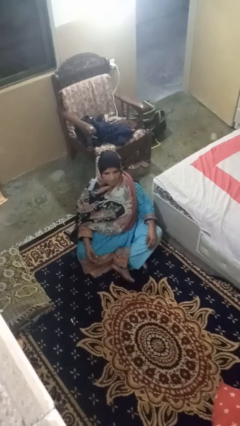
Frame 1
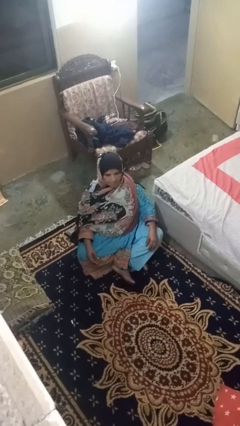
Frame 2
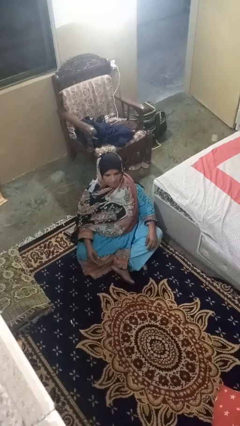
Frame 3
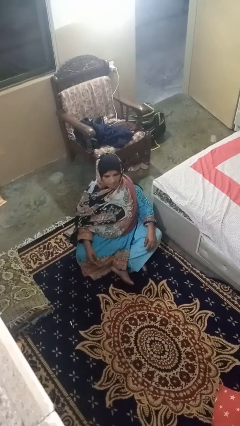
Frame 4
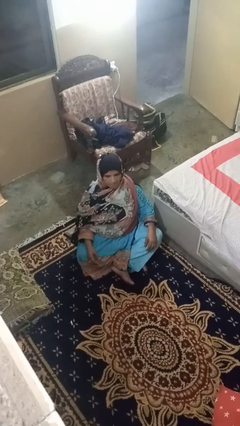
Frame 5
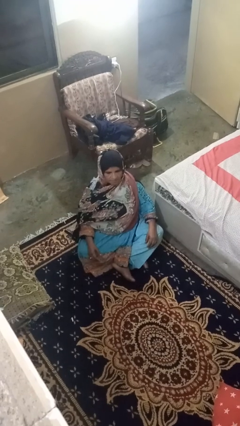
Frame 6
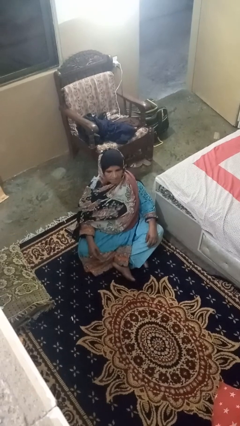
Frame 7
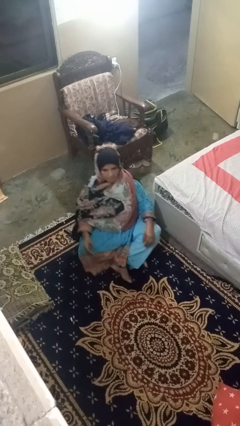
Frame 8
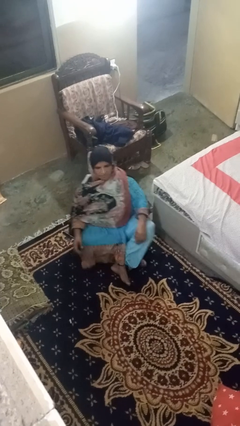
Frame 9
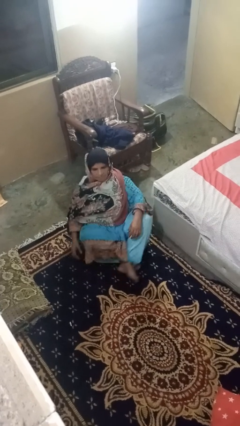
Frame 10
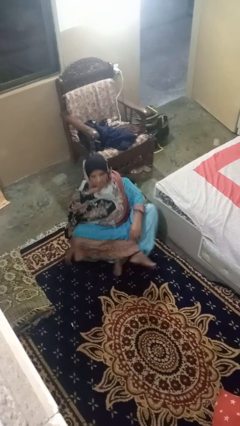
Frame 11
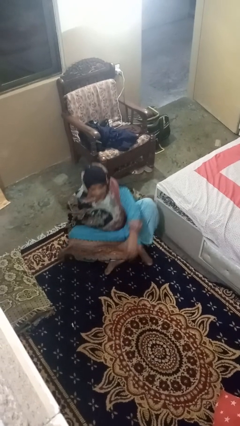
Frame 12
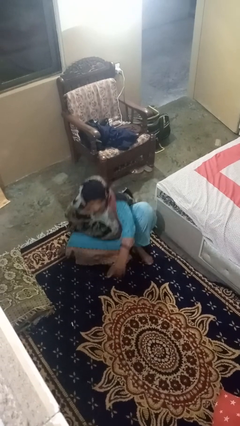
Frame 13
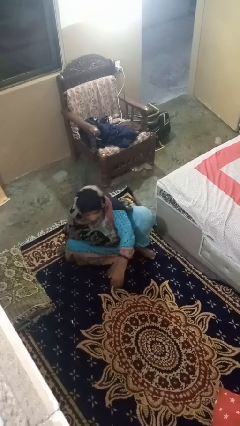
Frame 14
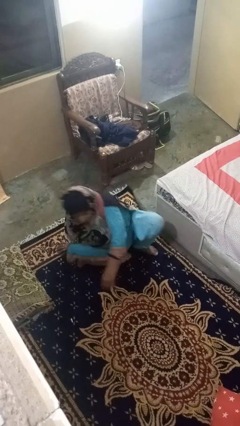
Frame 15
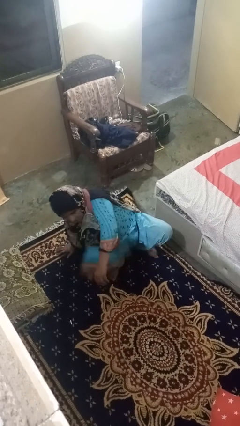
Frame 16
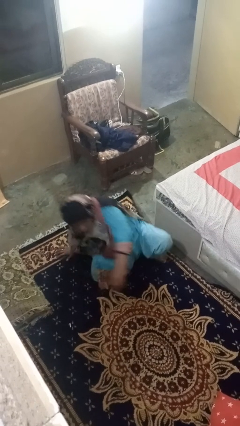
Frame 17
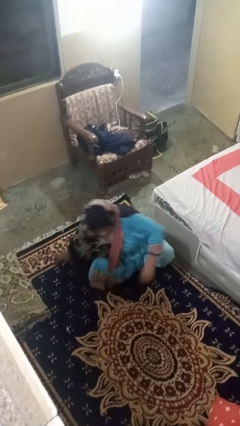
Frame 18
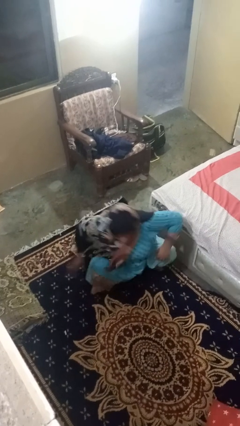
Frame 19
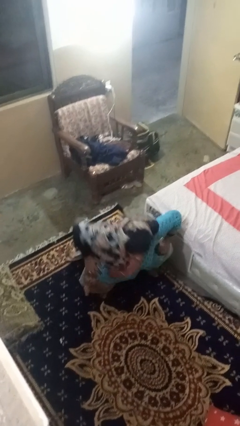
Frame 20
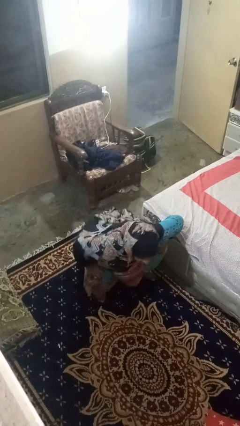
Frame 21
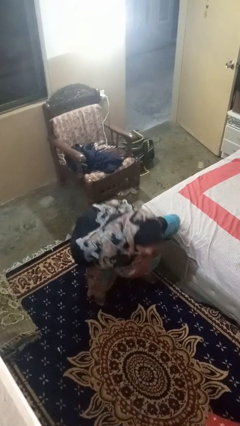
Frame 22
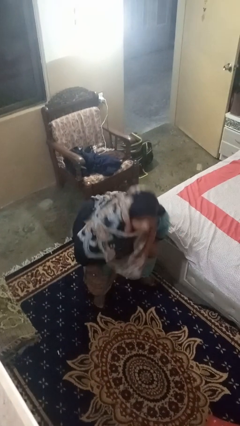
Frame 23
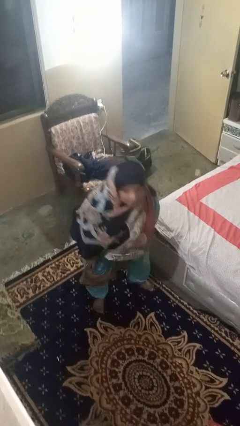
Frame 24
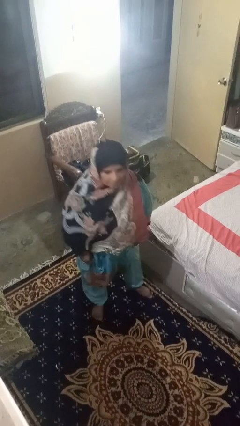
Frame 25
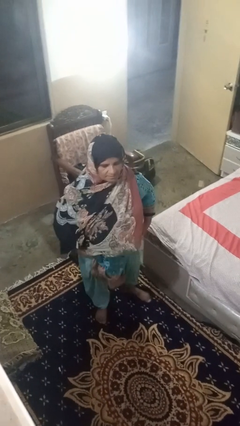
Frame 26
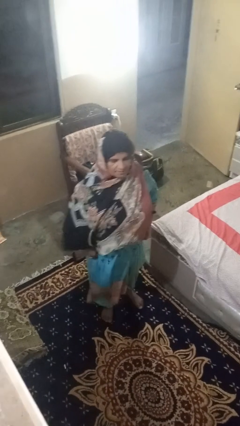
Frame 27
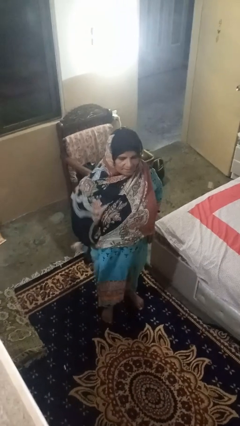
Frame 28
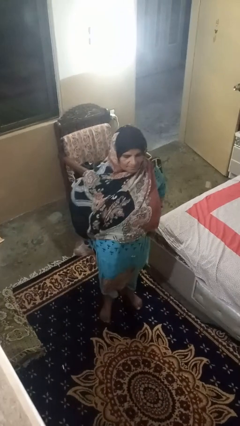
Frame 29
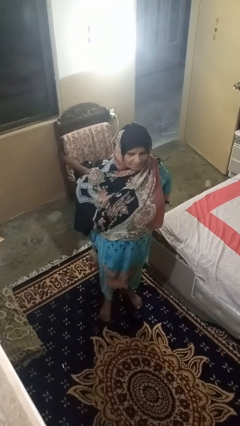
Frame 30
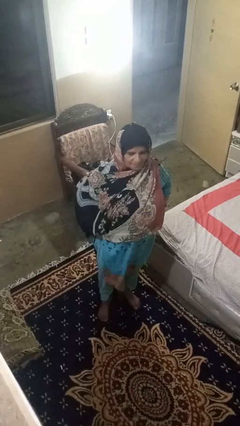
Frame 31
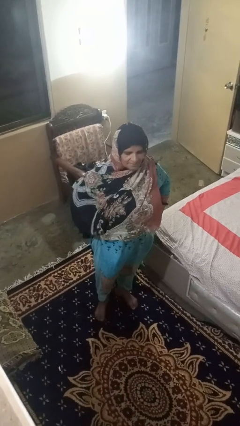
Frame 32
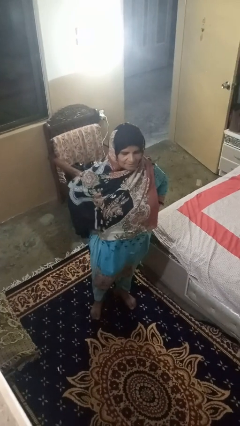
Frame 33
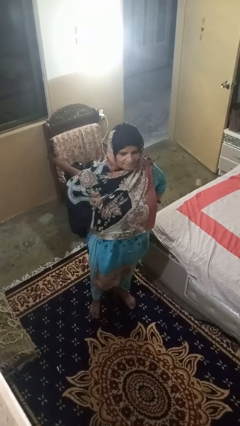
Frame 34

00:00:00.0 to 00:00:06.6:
person stands up from floor

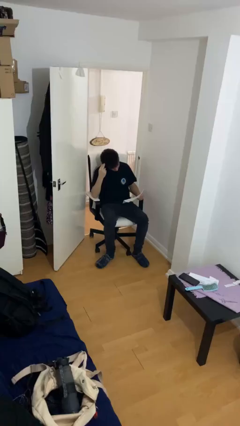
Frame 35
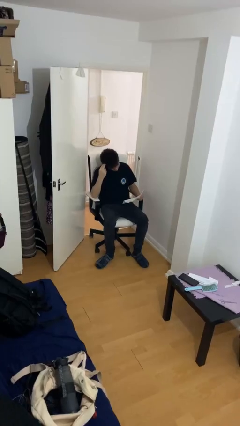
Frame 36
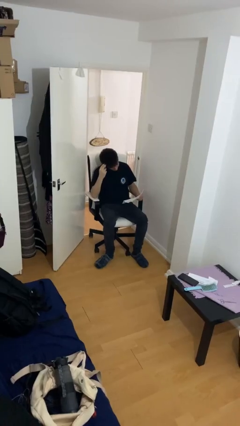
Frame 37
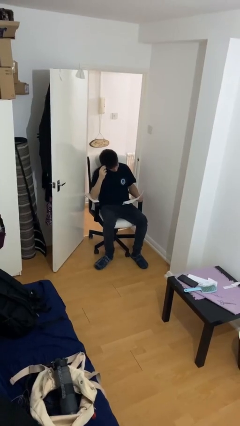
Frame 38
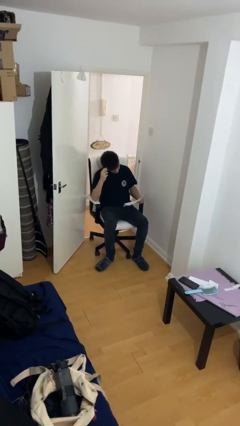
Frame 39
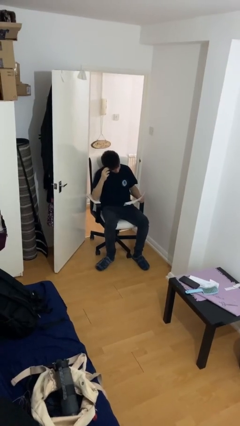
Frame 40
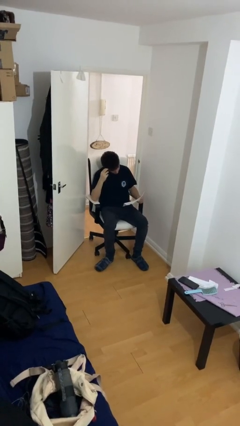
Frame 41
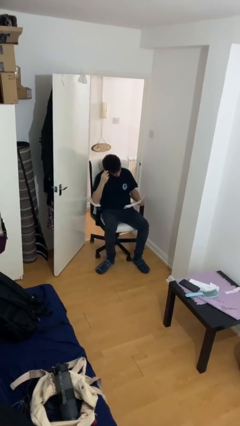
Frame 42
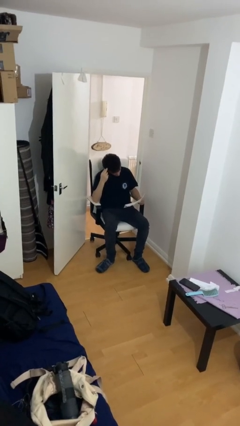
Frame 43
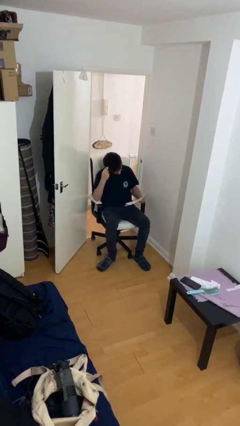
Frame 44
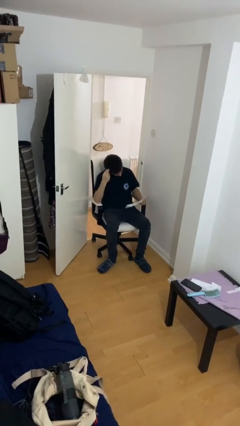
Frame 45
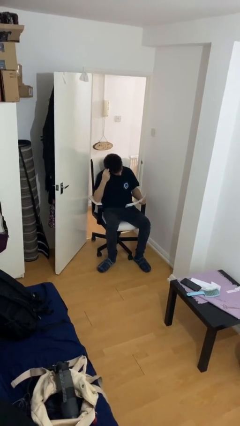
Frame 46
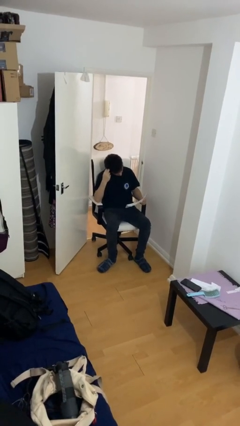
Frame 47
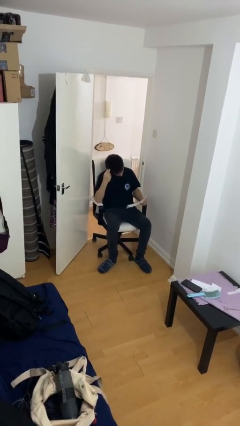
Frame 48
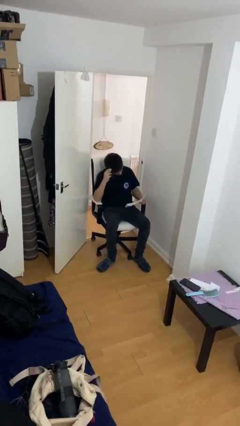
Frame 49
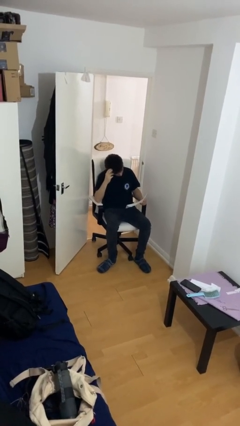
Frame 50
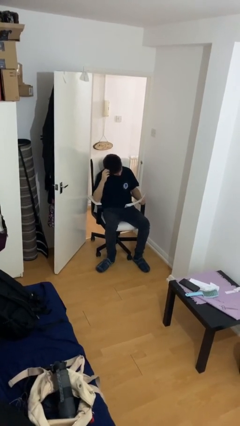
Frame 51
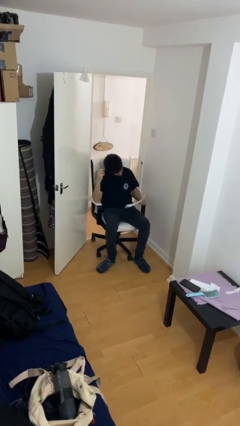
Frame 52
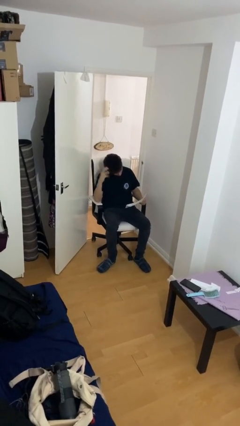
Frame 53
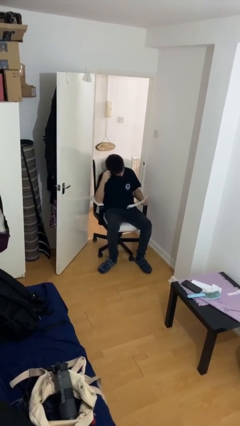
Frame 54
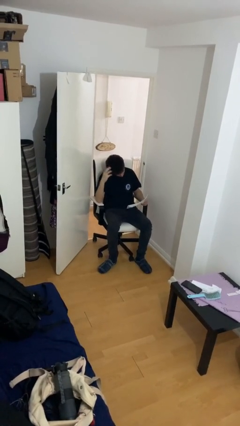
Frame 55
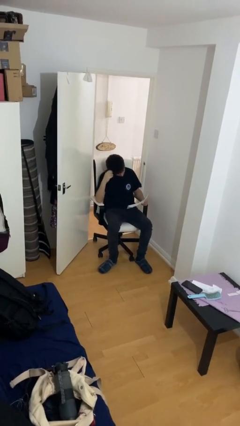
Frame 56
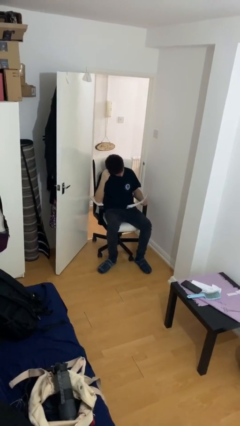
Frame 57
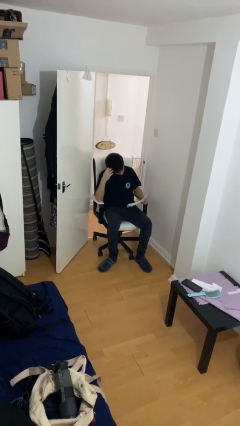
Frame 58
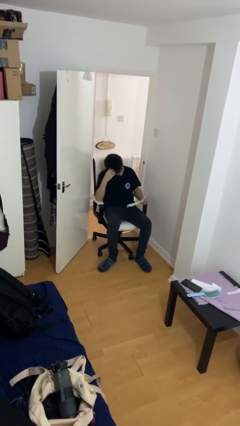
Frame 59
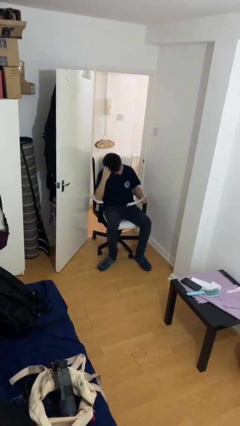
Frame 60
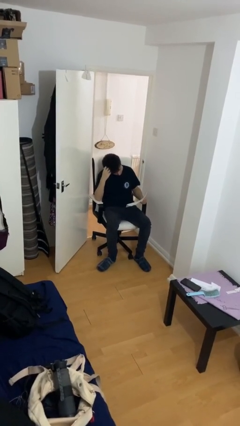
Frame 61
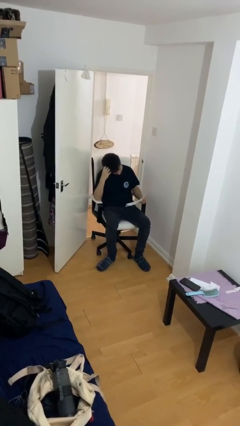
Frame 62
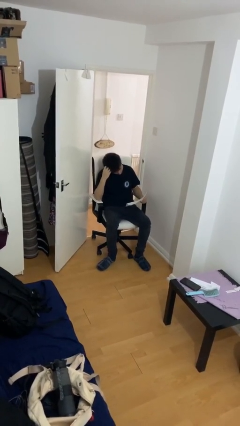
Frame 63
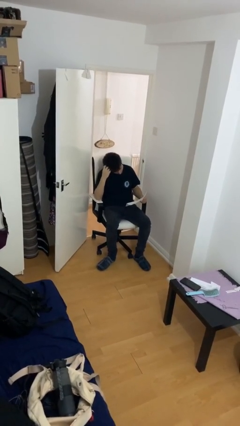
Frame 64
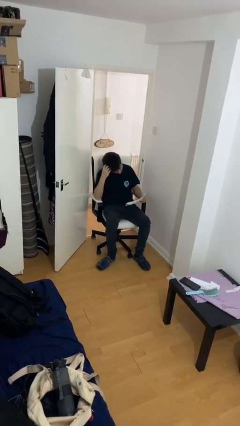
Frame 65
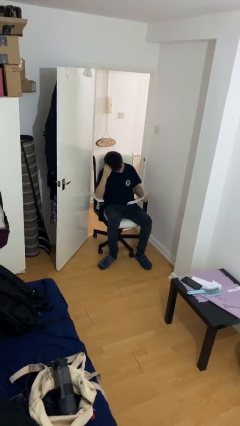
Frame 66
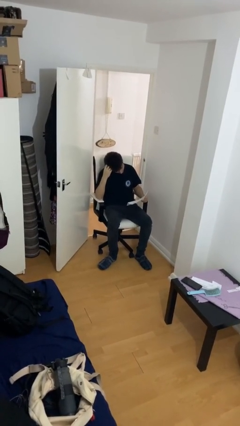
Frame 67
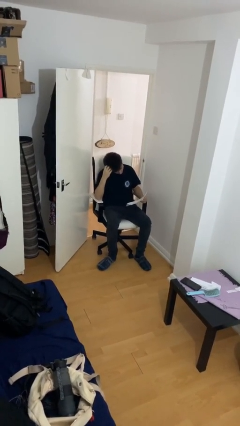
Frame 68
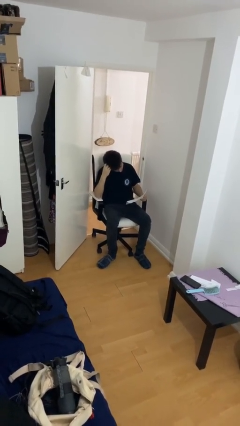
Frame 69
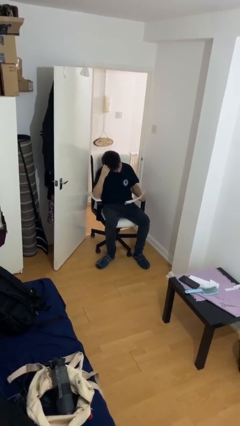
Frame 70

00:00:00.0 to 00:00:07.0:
person reads document

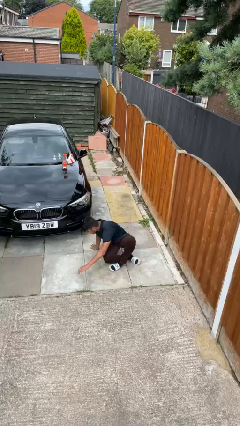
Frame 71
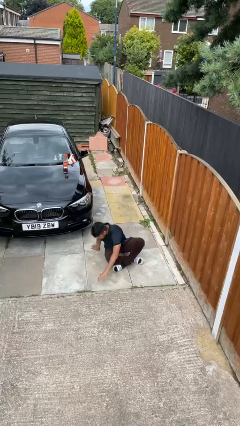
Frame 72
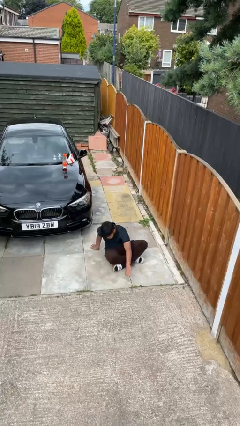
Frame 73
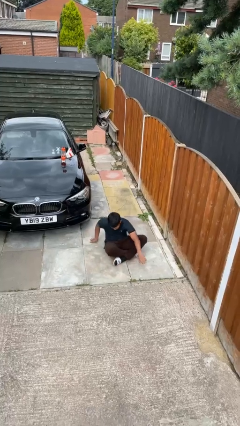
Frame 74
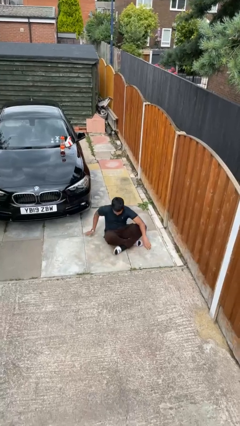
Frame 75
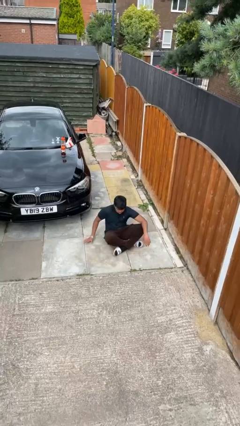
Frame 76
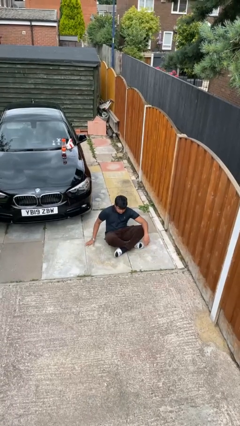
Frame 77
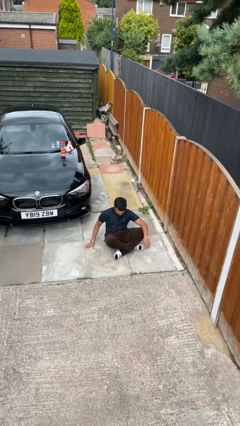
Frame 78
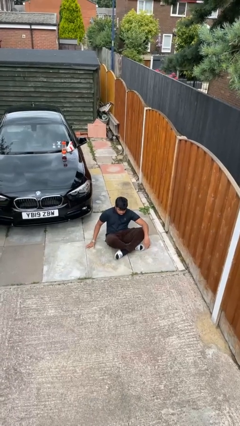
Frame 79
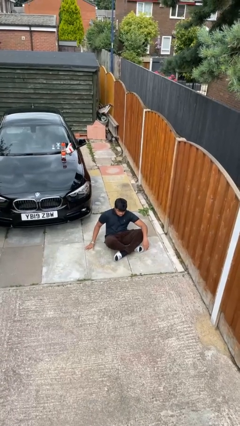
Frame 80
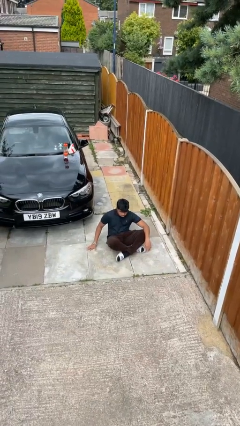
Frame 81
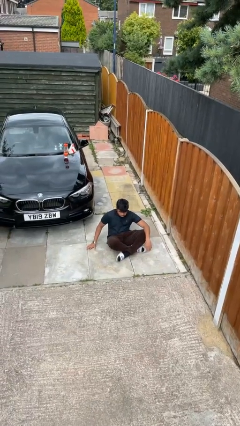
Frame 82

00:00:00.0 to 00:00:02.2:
person sits crisscross

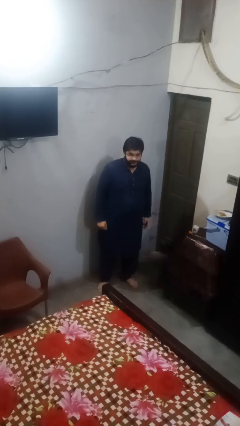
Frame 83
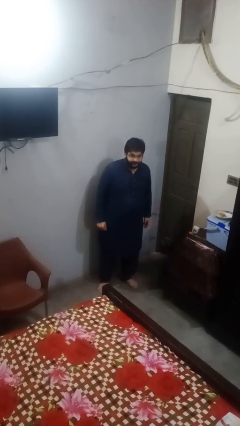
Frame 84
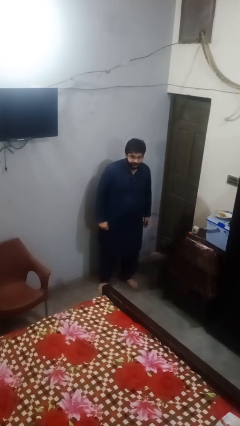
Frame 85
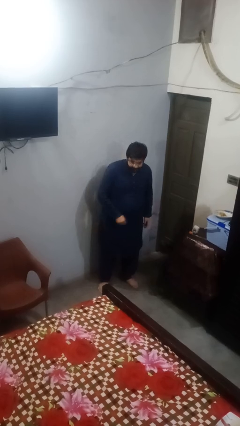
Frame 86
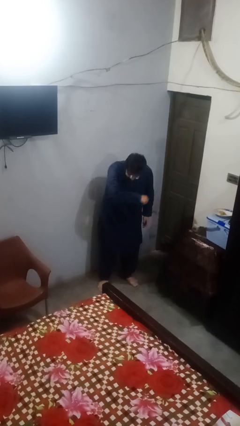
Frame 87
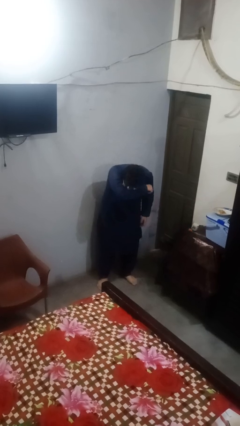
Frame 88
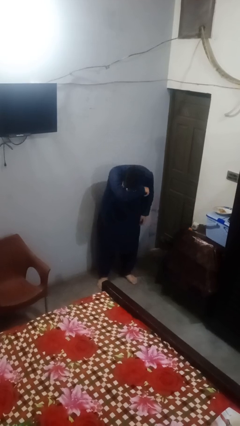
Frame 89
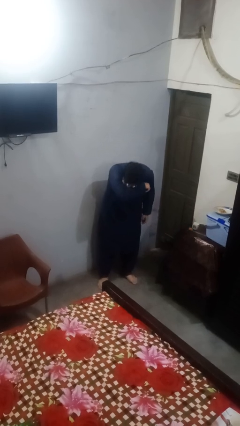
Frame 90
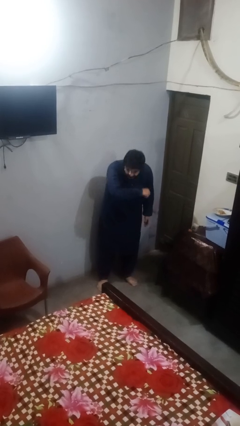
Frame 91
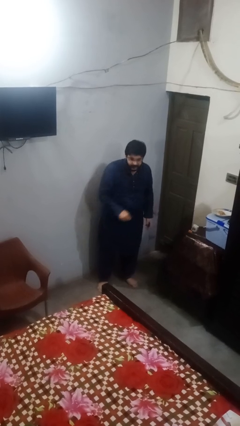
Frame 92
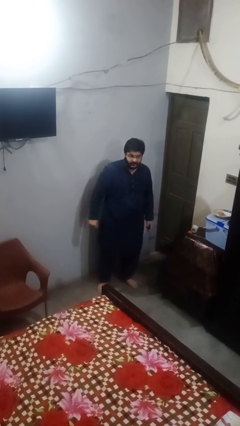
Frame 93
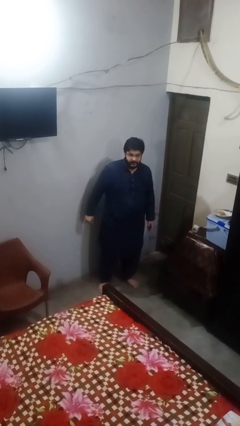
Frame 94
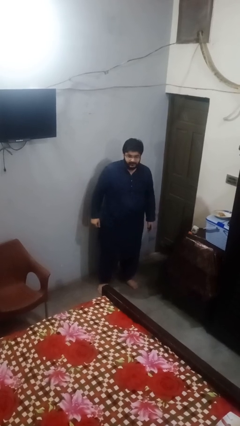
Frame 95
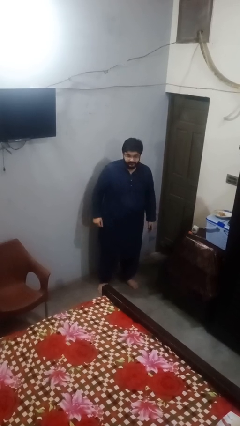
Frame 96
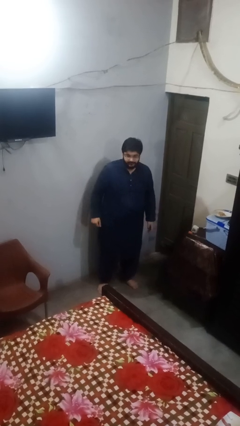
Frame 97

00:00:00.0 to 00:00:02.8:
person sneezes into arm
